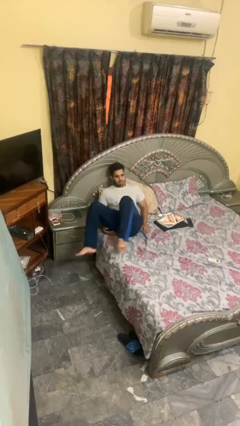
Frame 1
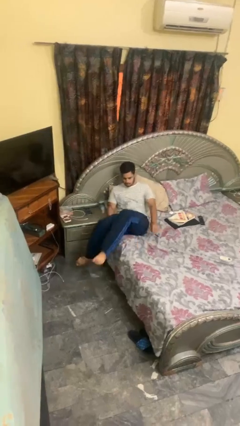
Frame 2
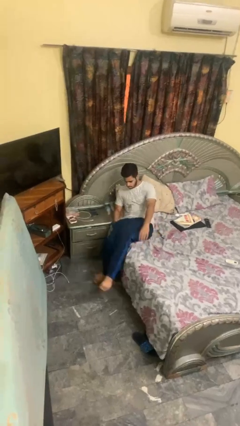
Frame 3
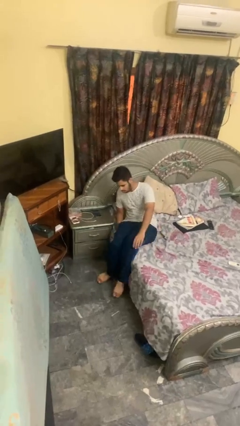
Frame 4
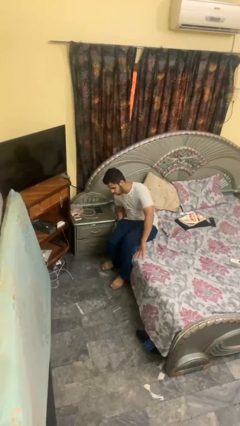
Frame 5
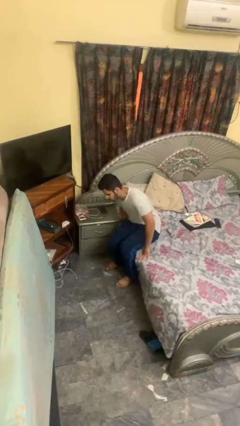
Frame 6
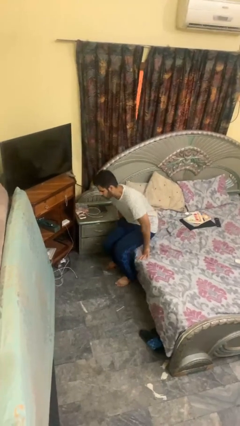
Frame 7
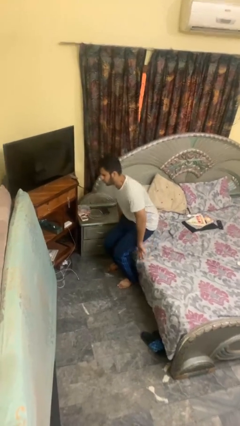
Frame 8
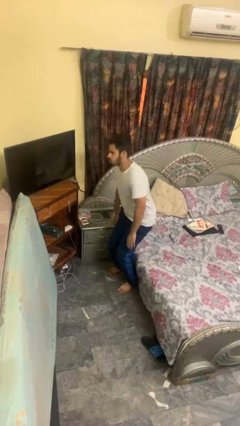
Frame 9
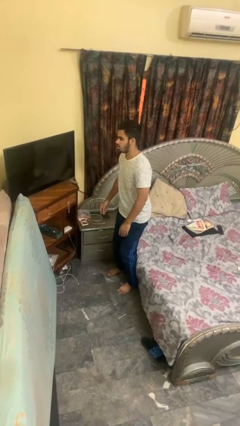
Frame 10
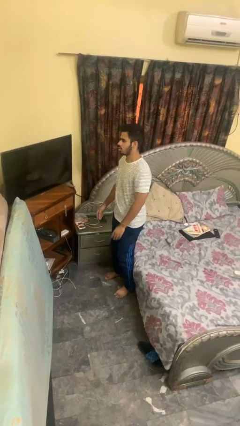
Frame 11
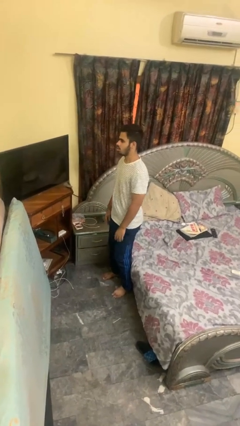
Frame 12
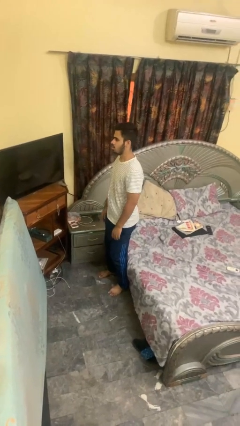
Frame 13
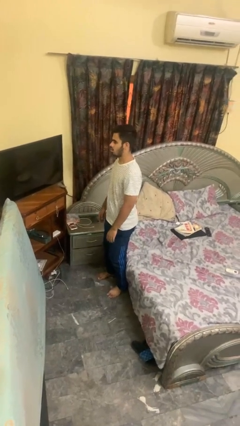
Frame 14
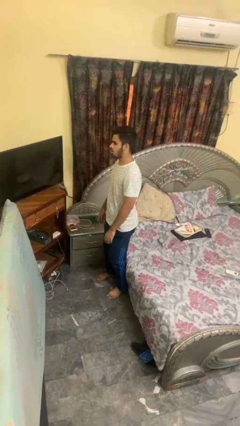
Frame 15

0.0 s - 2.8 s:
person stands up

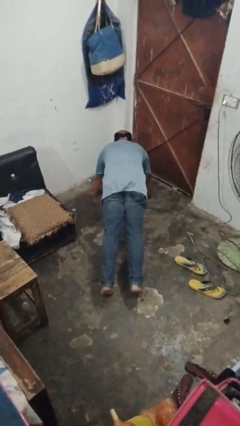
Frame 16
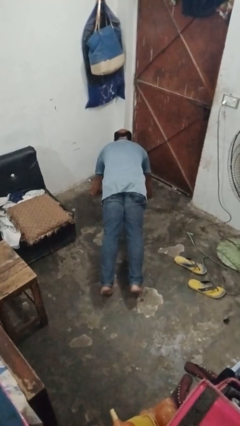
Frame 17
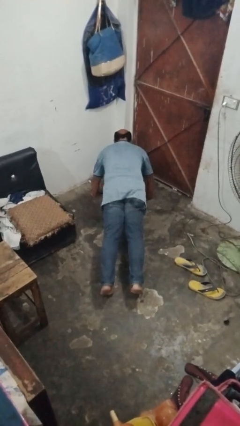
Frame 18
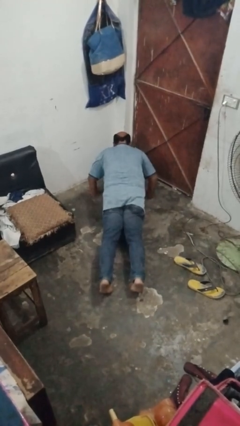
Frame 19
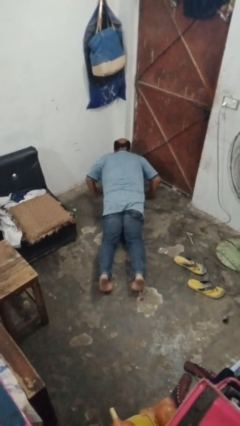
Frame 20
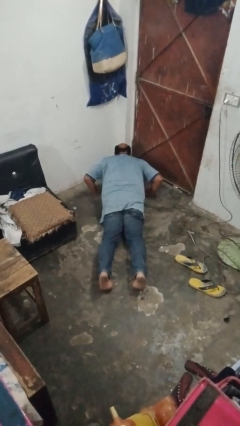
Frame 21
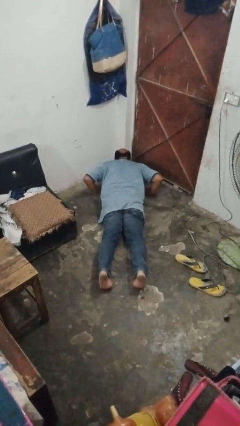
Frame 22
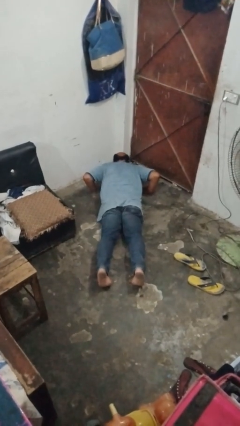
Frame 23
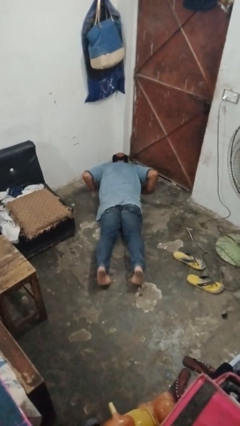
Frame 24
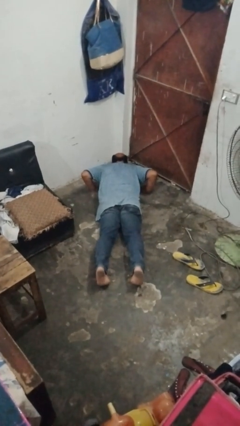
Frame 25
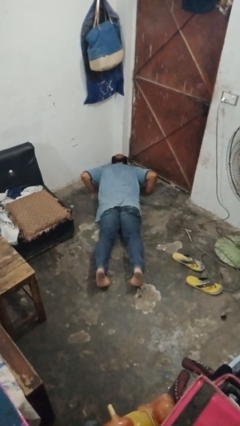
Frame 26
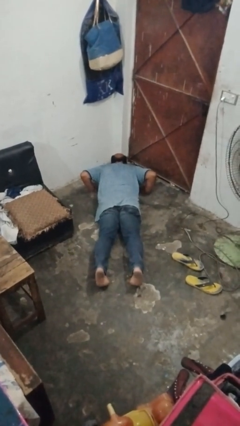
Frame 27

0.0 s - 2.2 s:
person exercises with pushup

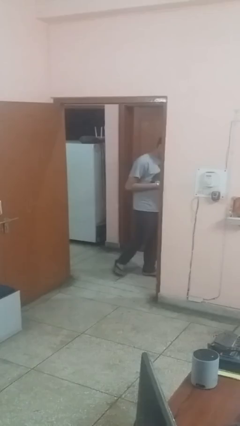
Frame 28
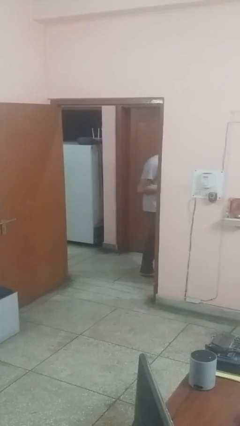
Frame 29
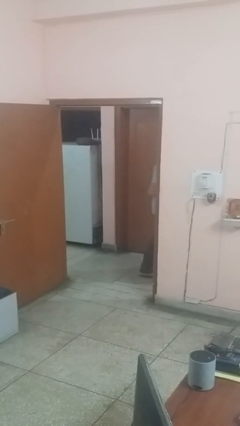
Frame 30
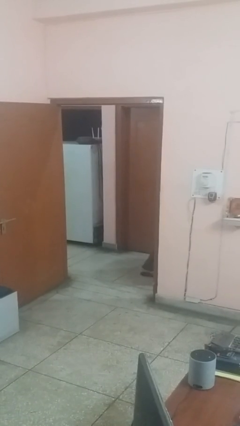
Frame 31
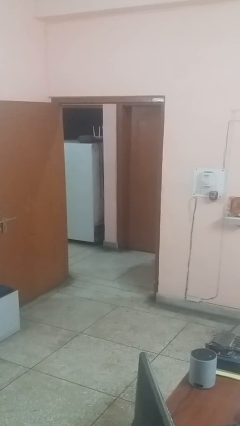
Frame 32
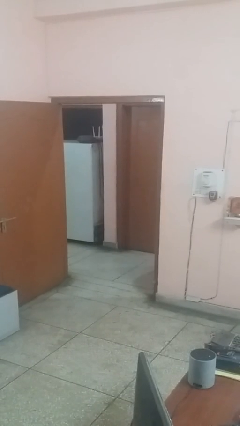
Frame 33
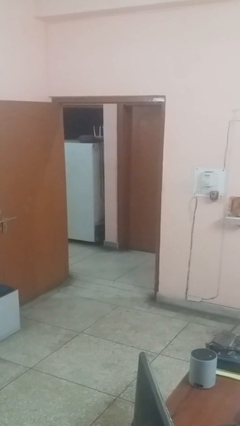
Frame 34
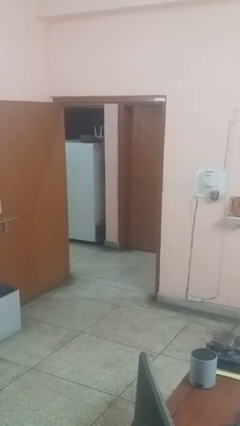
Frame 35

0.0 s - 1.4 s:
person exits scene through structure

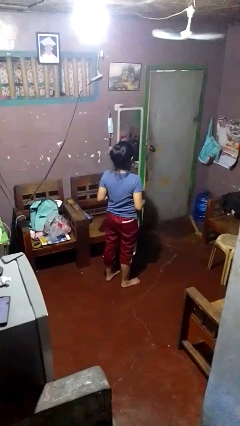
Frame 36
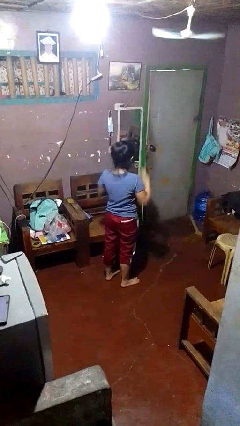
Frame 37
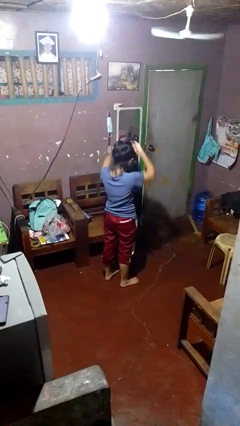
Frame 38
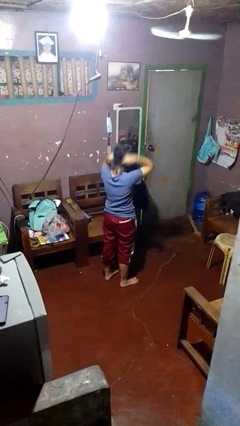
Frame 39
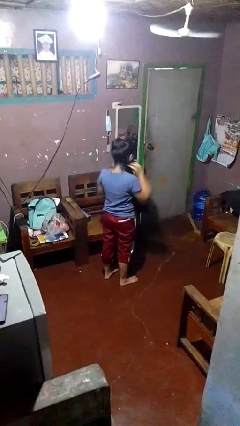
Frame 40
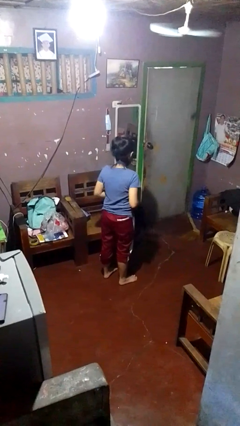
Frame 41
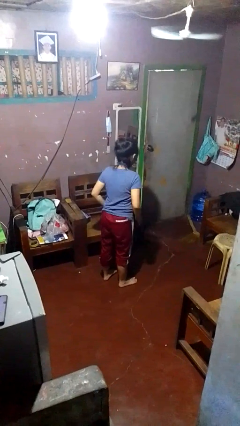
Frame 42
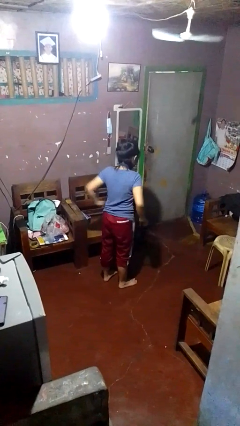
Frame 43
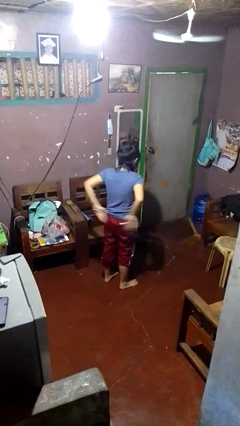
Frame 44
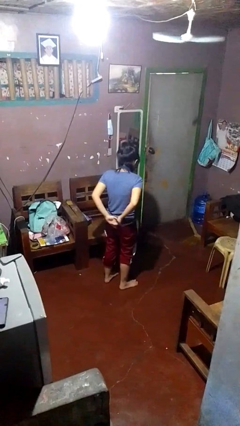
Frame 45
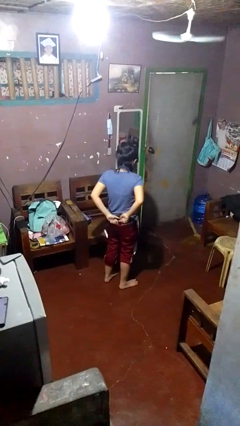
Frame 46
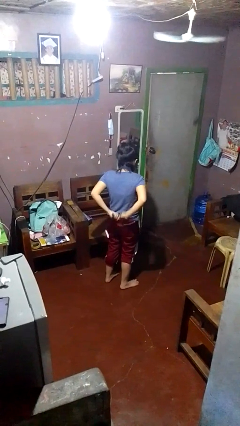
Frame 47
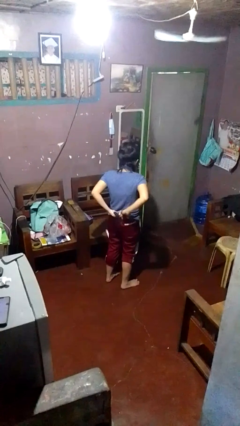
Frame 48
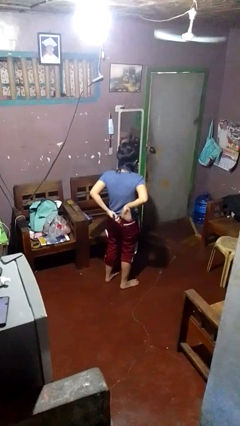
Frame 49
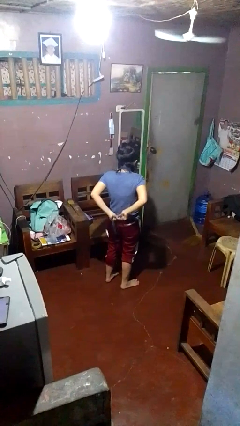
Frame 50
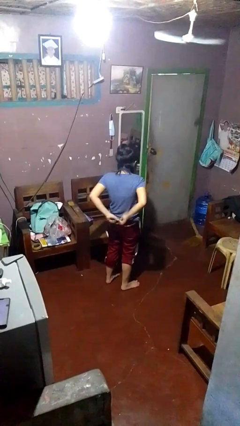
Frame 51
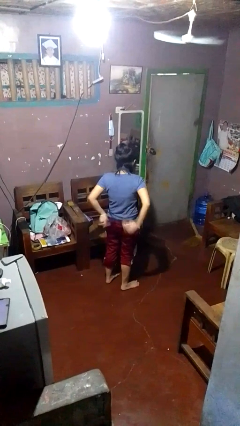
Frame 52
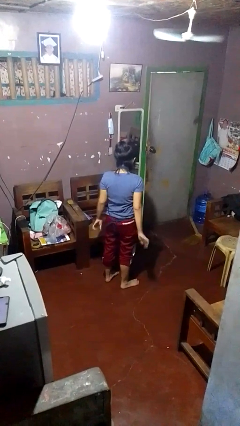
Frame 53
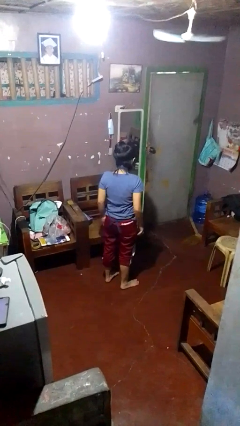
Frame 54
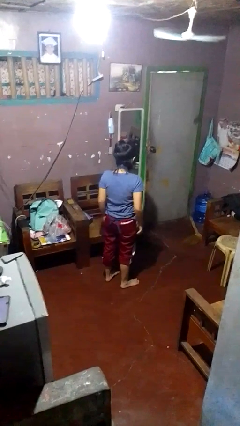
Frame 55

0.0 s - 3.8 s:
person puts on apron

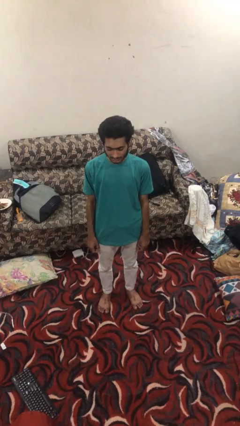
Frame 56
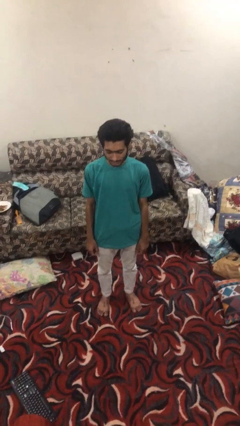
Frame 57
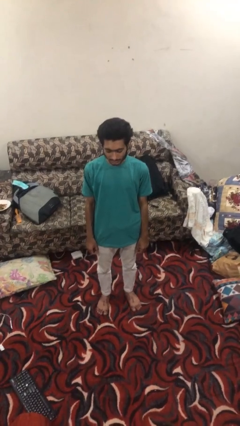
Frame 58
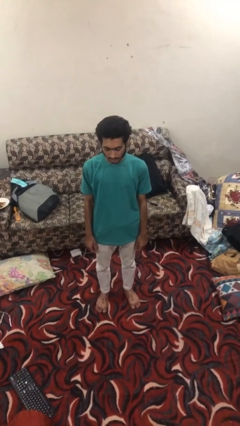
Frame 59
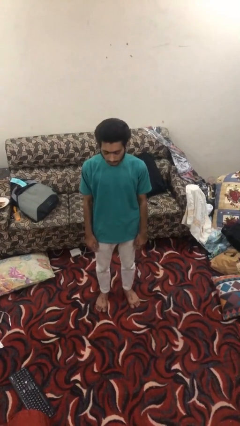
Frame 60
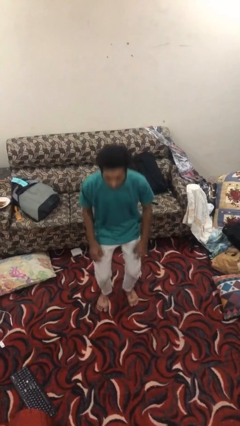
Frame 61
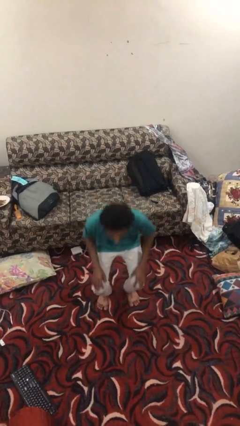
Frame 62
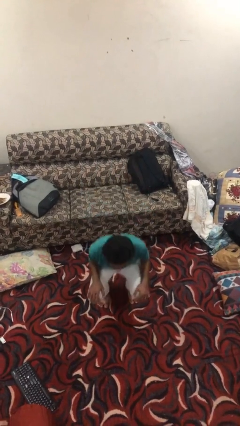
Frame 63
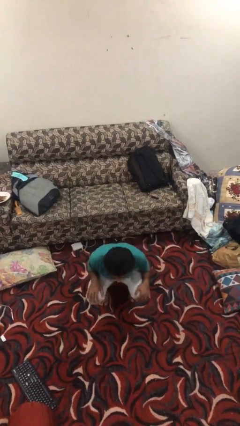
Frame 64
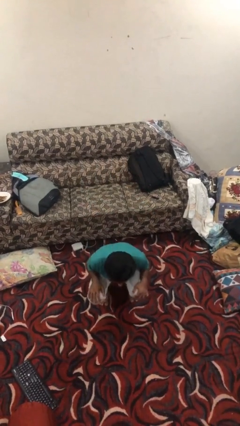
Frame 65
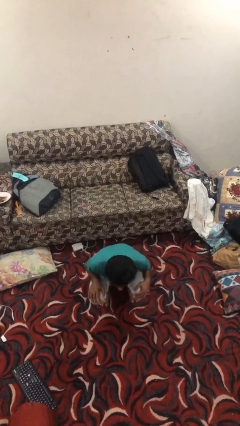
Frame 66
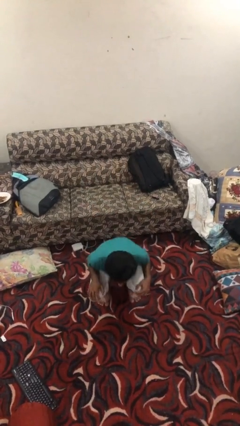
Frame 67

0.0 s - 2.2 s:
person exercises with situp

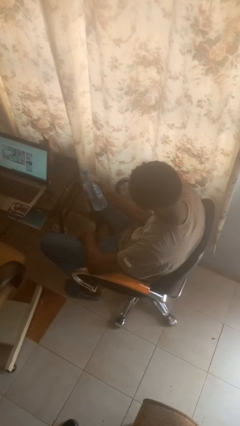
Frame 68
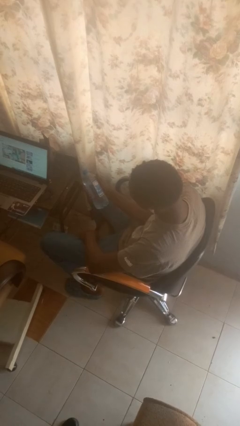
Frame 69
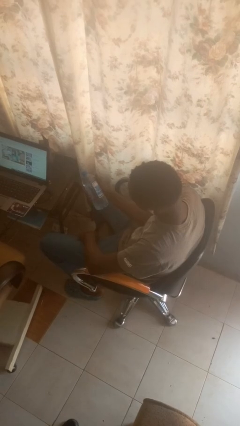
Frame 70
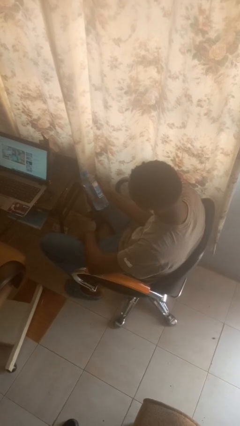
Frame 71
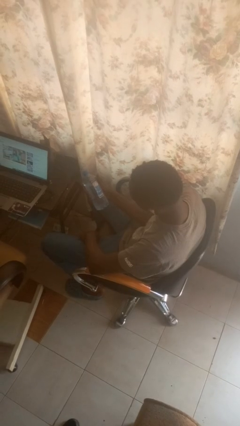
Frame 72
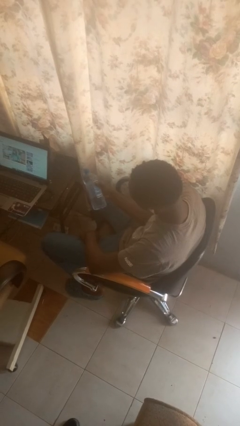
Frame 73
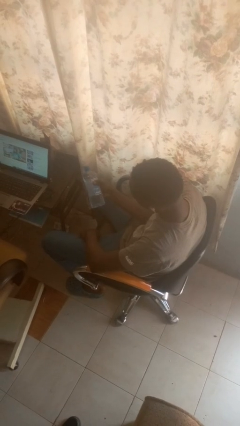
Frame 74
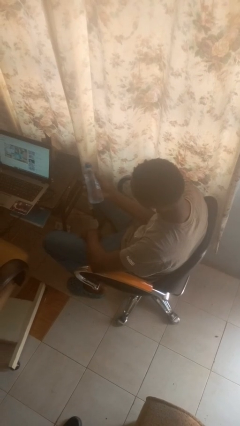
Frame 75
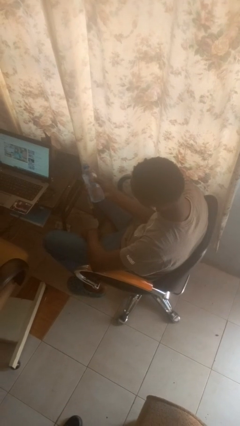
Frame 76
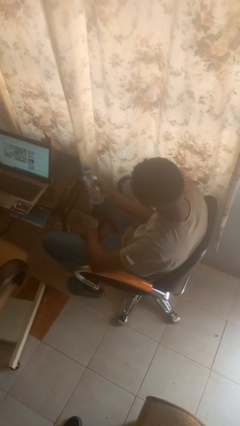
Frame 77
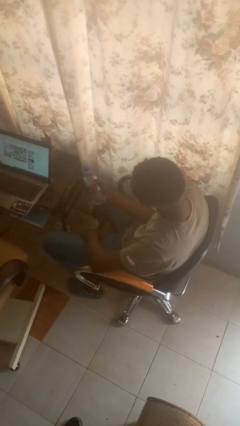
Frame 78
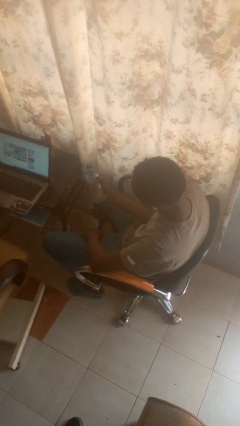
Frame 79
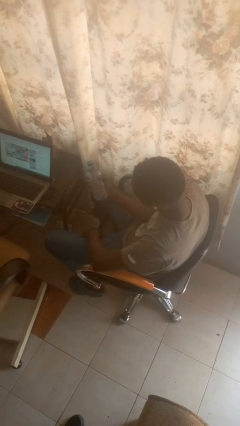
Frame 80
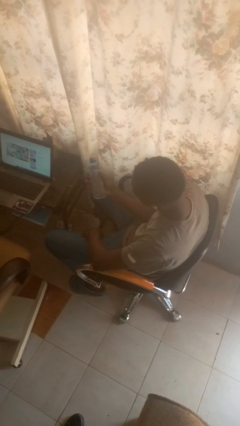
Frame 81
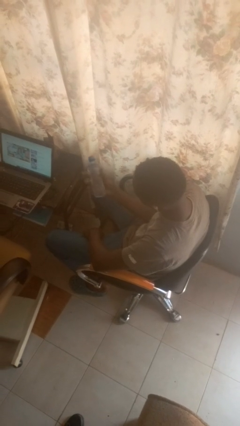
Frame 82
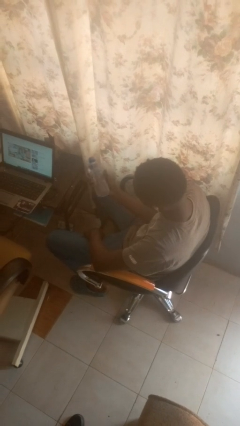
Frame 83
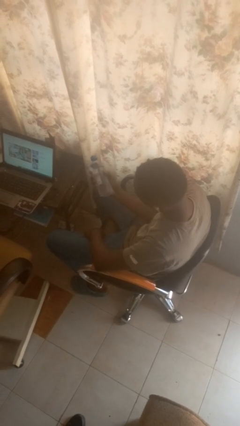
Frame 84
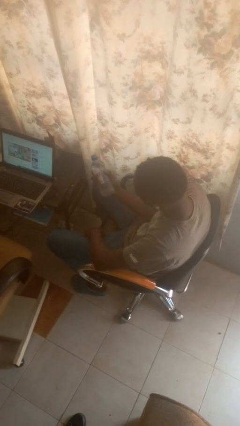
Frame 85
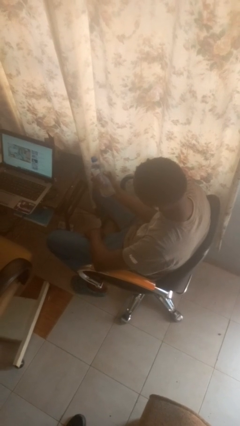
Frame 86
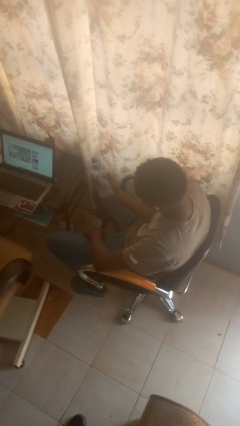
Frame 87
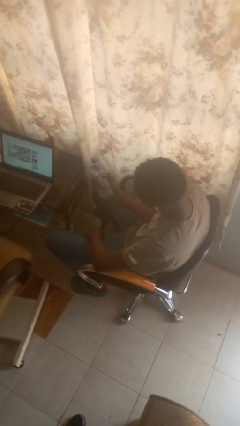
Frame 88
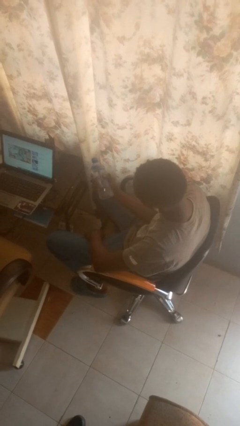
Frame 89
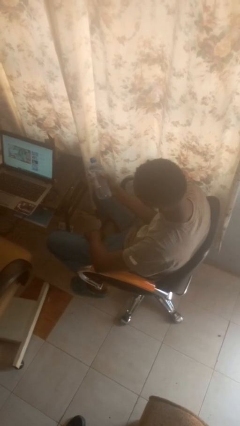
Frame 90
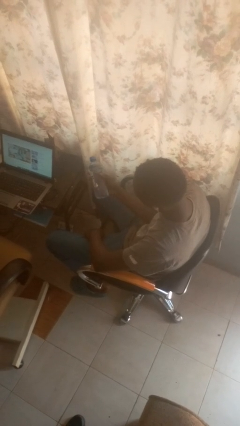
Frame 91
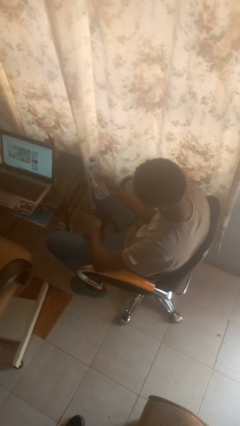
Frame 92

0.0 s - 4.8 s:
person squeezes object

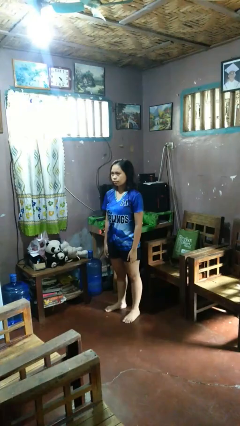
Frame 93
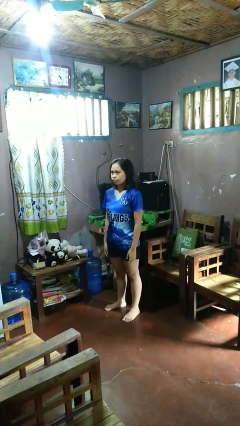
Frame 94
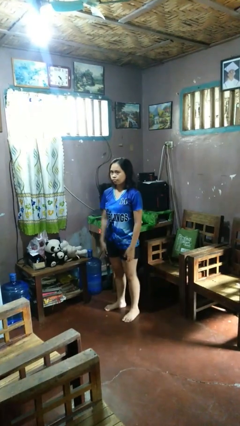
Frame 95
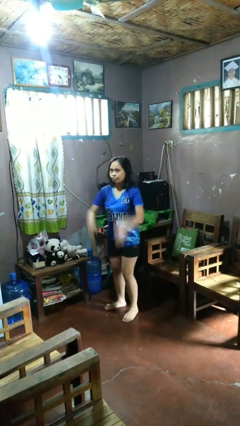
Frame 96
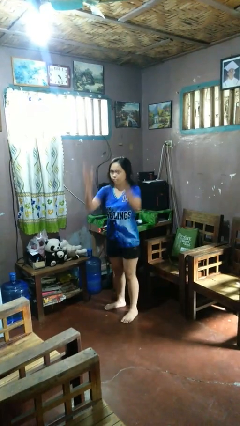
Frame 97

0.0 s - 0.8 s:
person claps hands
